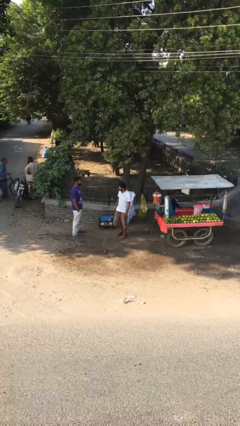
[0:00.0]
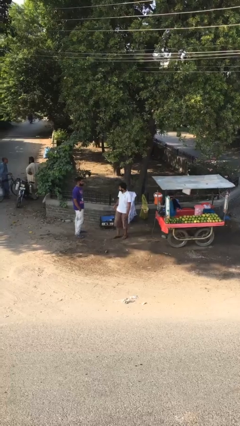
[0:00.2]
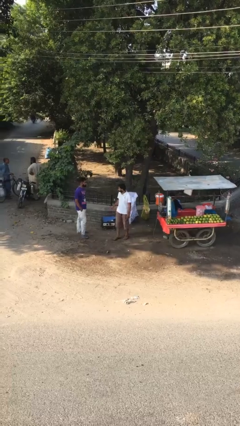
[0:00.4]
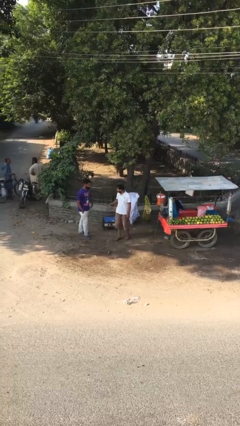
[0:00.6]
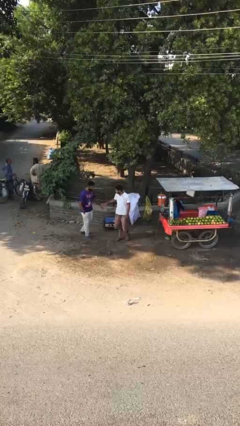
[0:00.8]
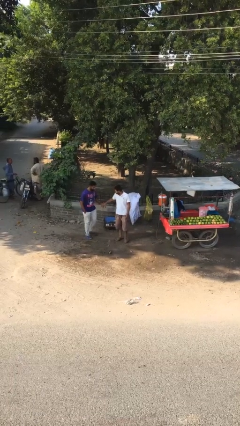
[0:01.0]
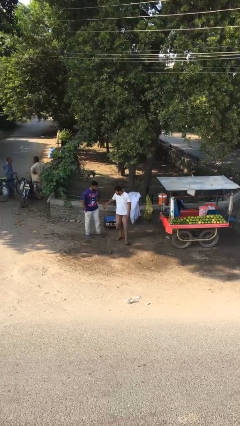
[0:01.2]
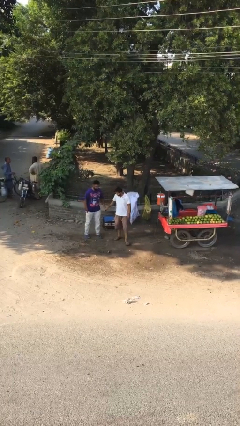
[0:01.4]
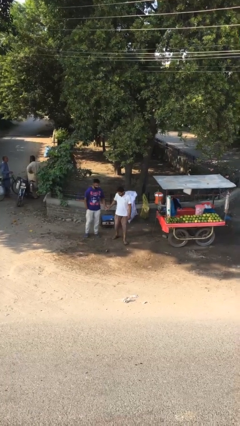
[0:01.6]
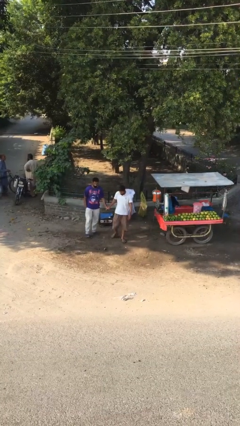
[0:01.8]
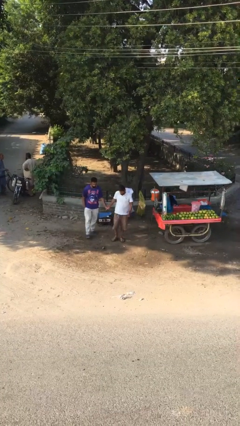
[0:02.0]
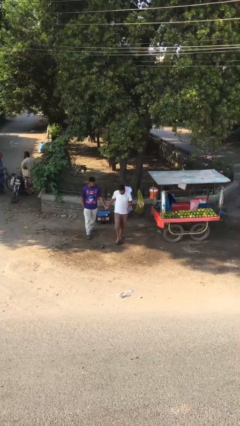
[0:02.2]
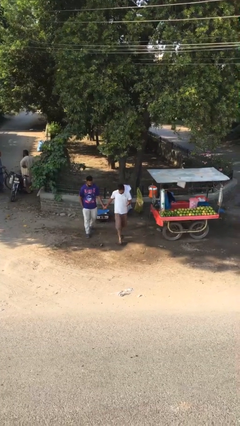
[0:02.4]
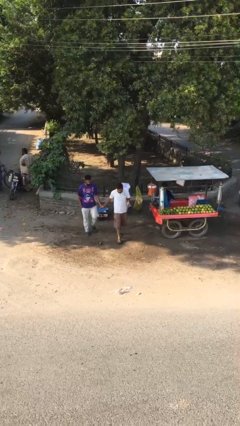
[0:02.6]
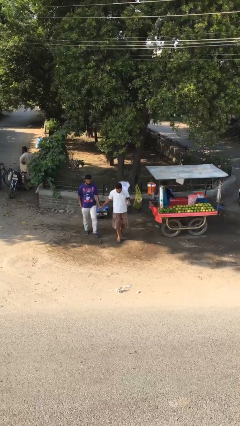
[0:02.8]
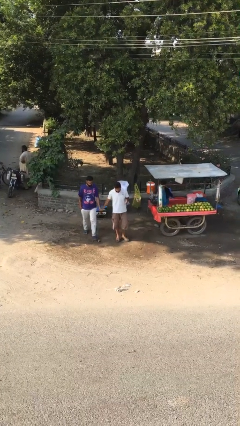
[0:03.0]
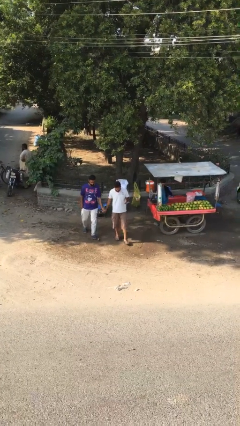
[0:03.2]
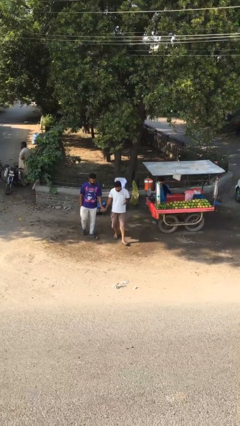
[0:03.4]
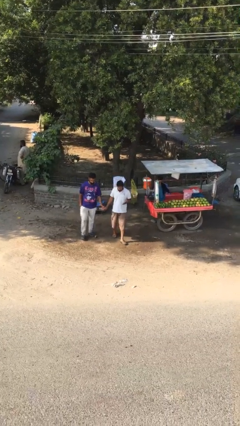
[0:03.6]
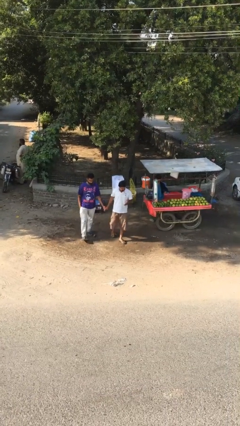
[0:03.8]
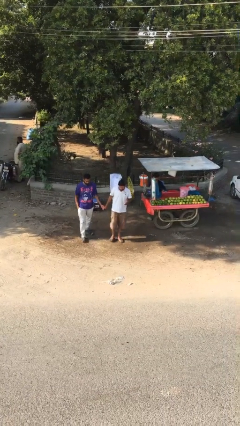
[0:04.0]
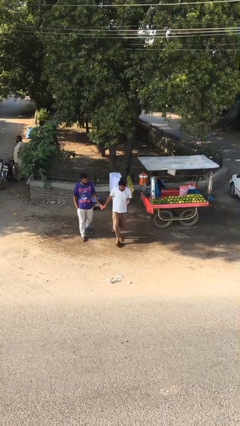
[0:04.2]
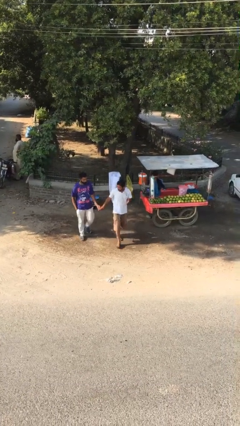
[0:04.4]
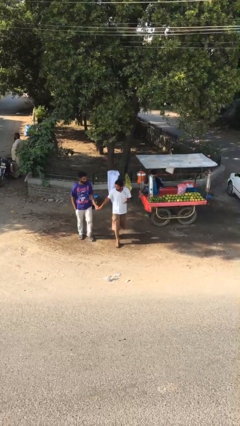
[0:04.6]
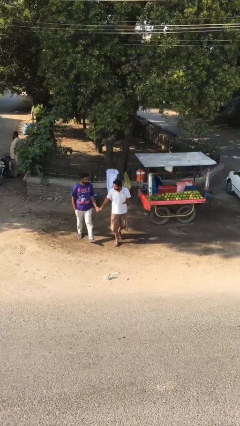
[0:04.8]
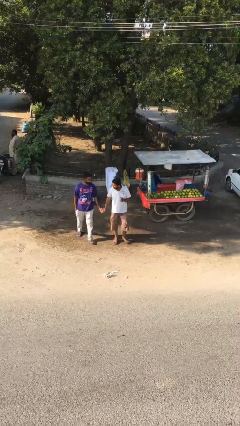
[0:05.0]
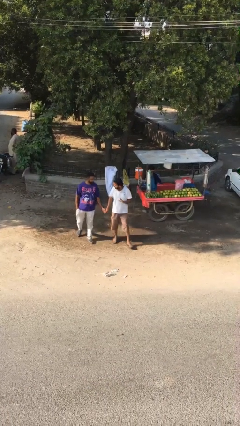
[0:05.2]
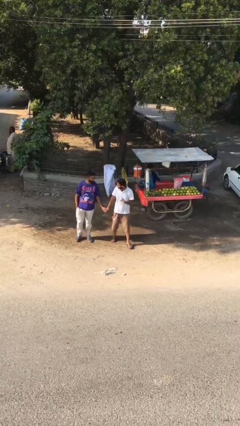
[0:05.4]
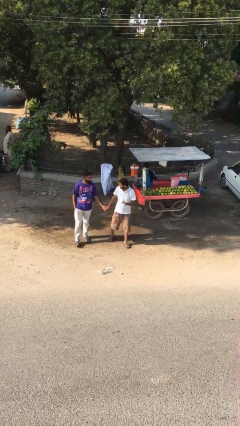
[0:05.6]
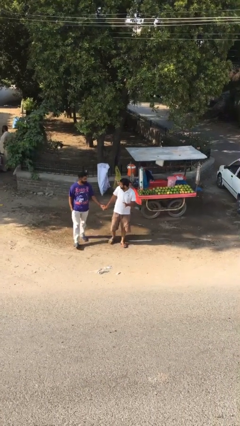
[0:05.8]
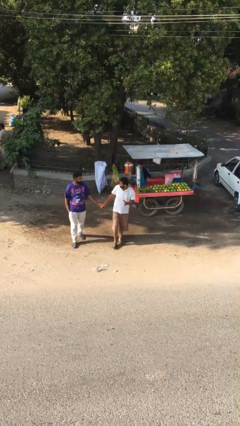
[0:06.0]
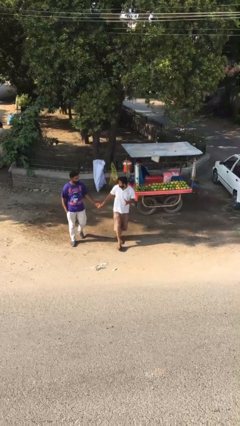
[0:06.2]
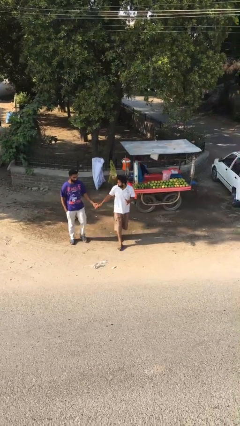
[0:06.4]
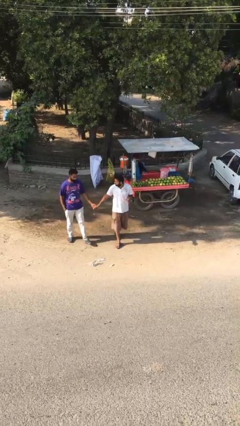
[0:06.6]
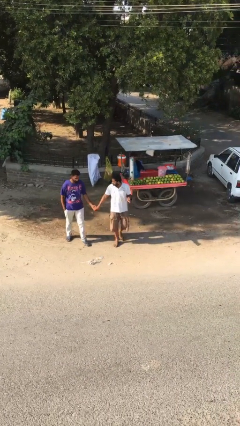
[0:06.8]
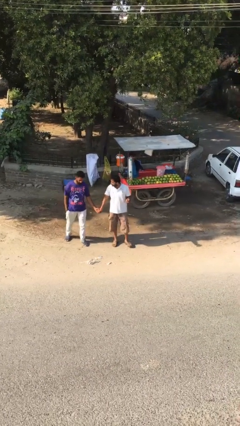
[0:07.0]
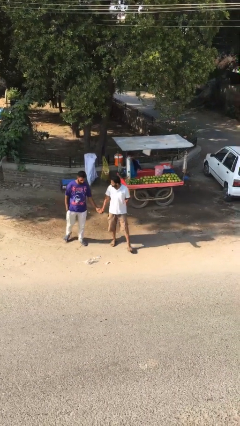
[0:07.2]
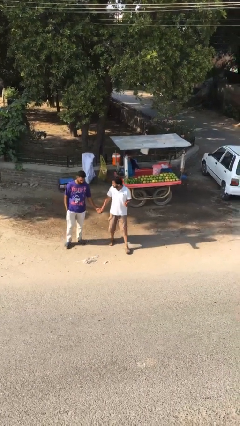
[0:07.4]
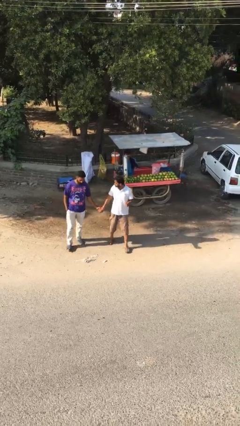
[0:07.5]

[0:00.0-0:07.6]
person holds hand

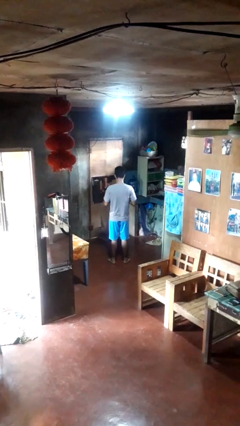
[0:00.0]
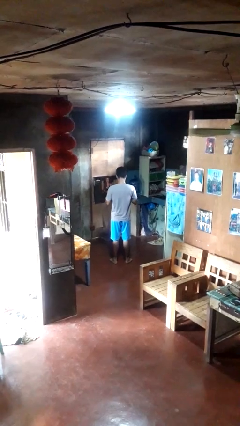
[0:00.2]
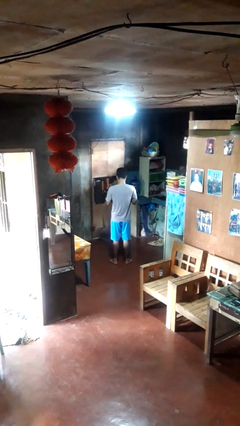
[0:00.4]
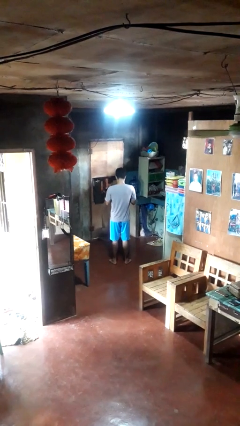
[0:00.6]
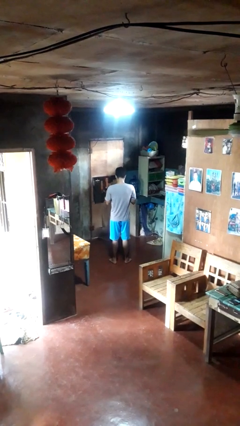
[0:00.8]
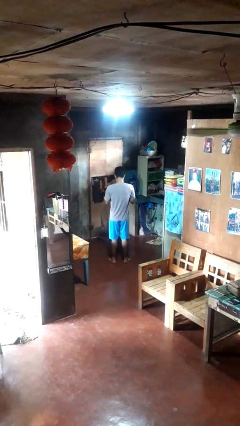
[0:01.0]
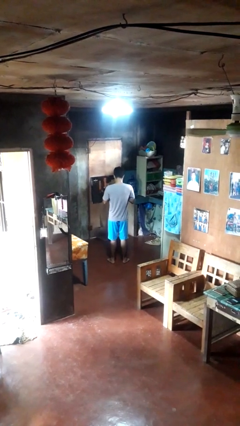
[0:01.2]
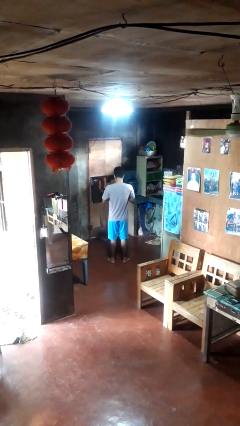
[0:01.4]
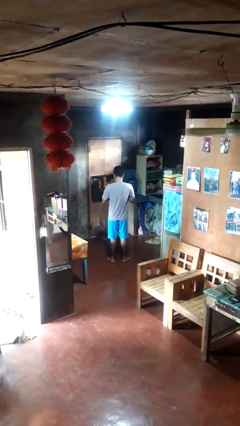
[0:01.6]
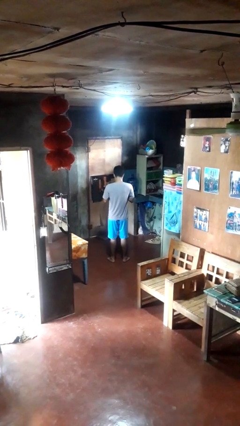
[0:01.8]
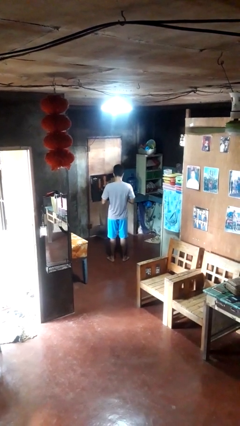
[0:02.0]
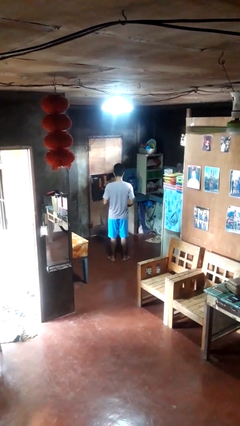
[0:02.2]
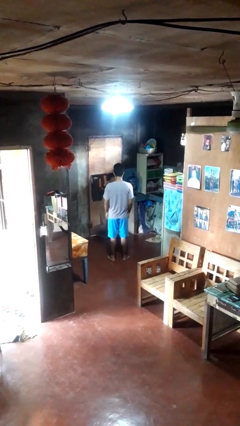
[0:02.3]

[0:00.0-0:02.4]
person unbuttons shirt

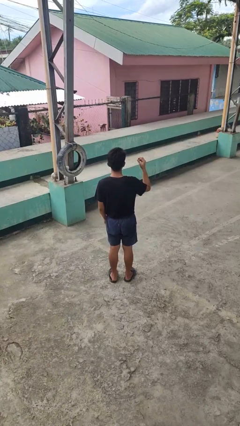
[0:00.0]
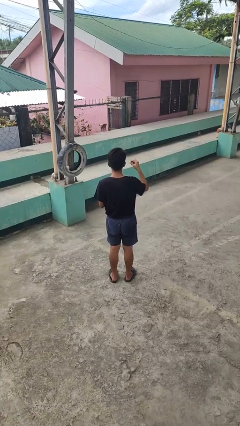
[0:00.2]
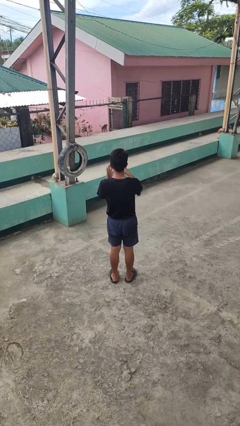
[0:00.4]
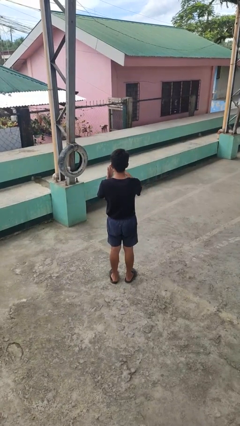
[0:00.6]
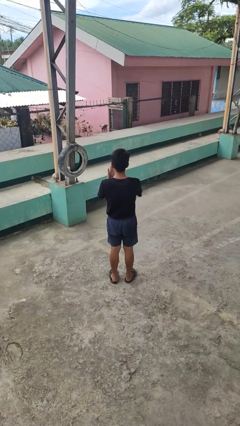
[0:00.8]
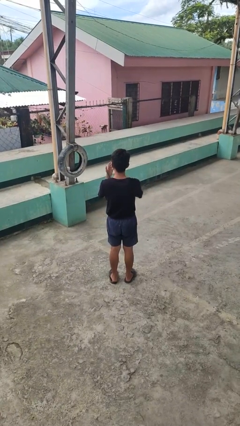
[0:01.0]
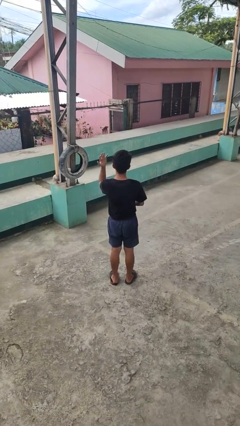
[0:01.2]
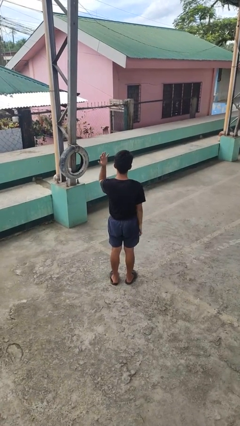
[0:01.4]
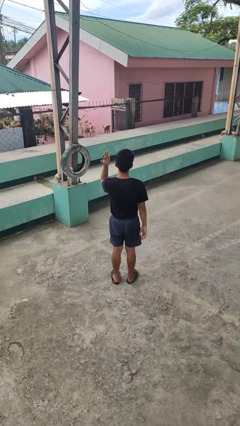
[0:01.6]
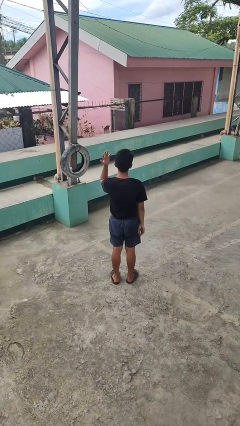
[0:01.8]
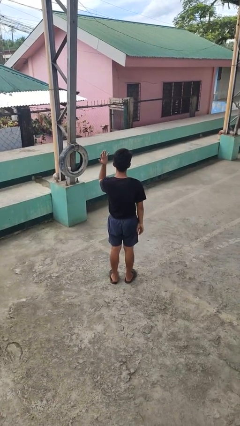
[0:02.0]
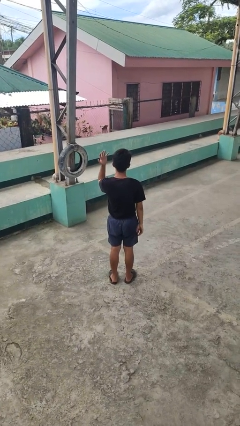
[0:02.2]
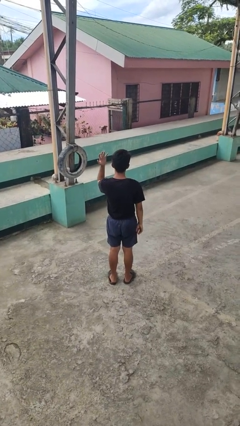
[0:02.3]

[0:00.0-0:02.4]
person puts on ring

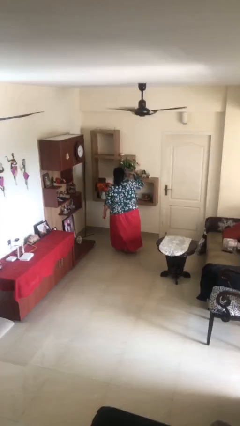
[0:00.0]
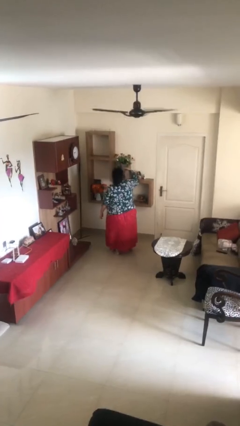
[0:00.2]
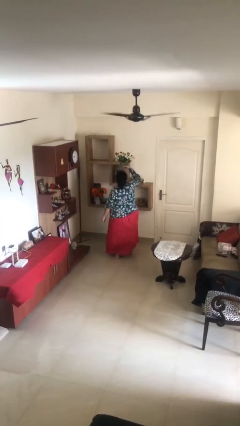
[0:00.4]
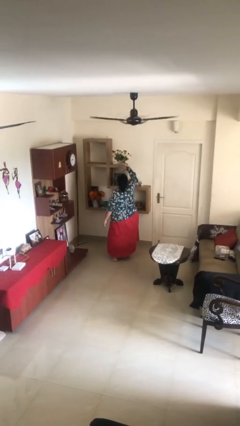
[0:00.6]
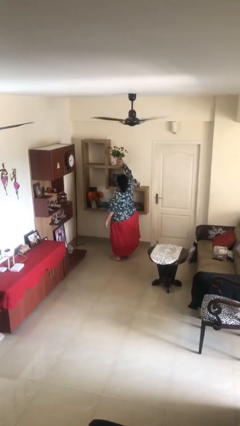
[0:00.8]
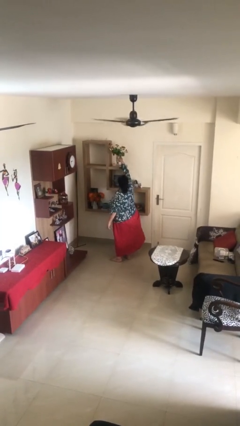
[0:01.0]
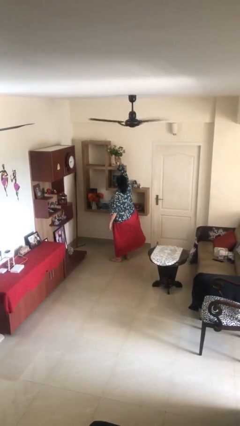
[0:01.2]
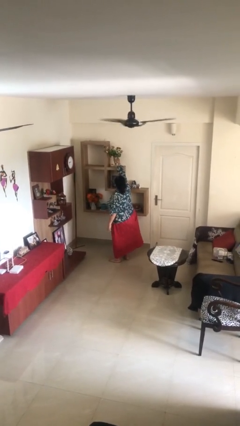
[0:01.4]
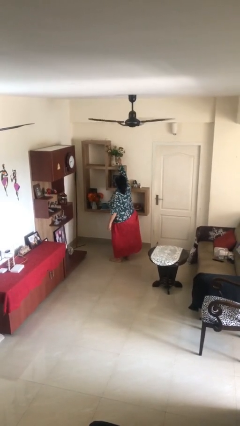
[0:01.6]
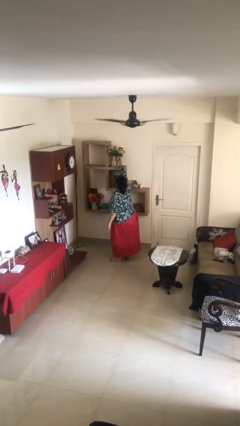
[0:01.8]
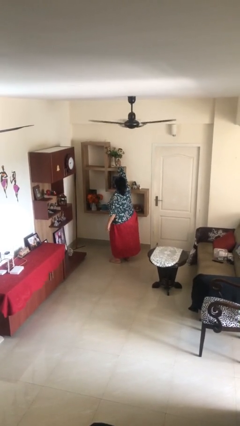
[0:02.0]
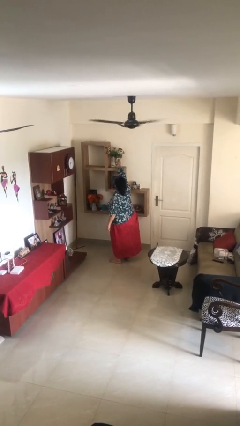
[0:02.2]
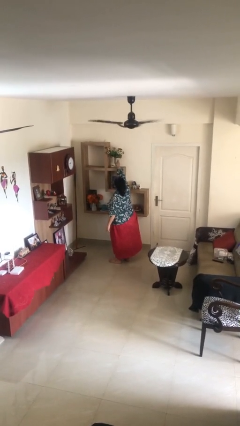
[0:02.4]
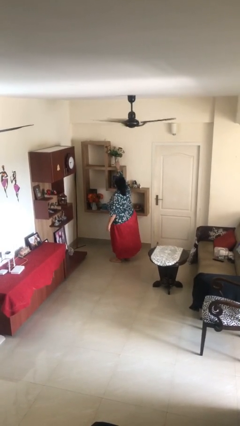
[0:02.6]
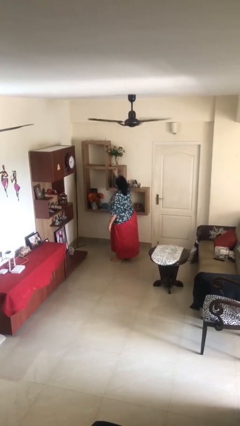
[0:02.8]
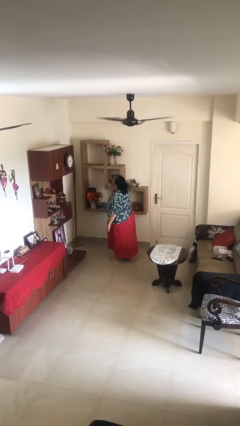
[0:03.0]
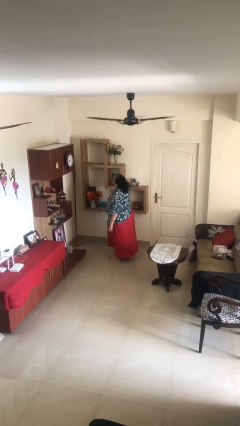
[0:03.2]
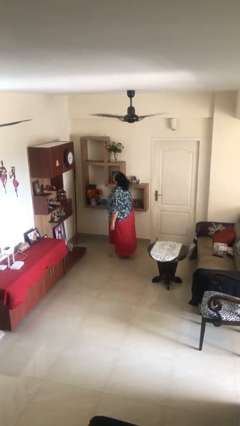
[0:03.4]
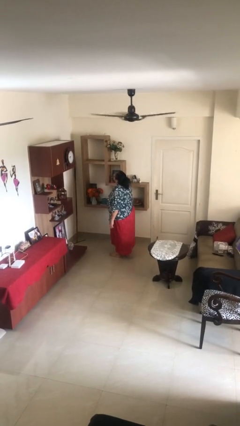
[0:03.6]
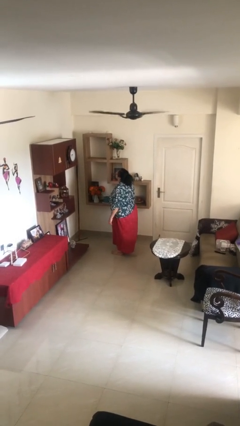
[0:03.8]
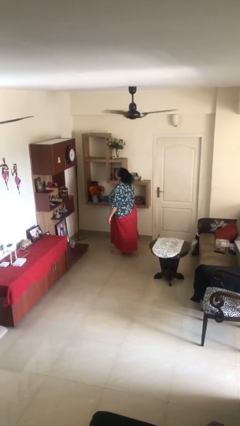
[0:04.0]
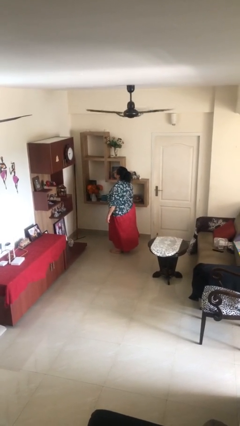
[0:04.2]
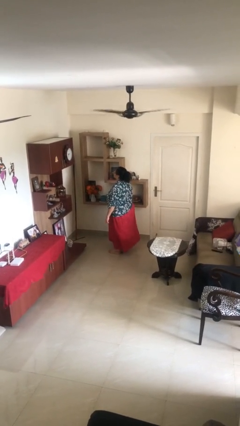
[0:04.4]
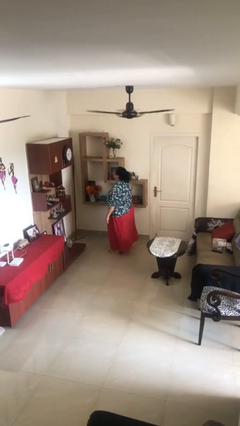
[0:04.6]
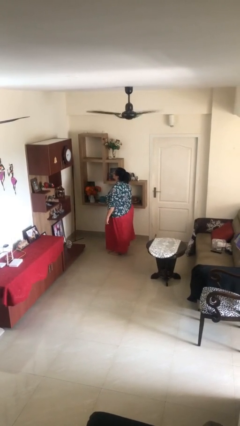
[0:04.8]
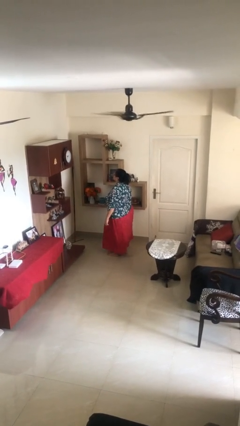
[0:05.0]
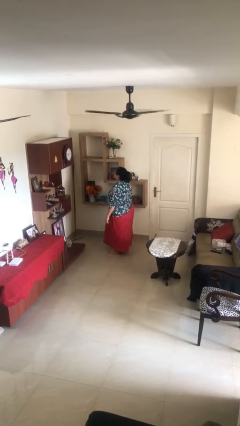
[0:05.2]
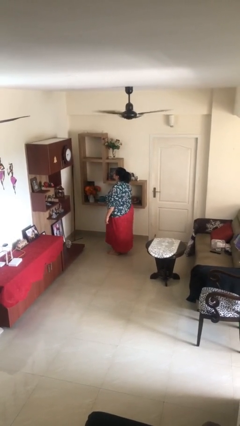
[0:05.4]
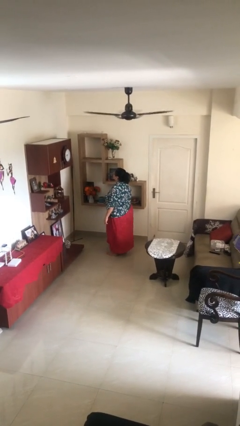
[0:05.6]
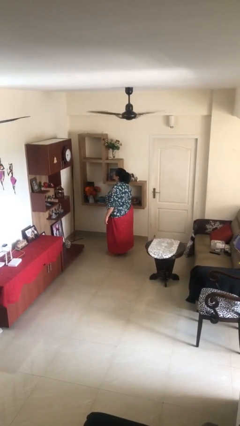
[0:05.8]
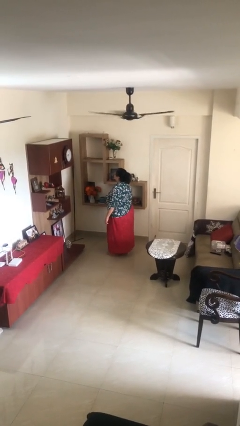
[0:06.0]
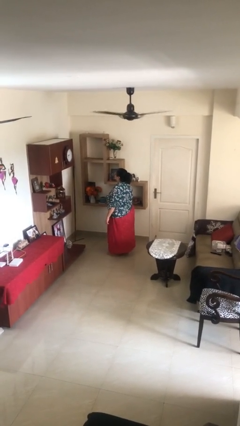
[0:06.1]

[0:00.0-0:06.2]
person puts down object on shelf
